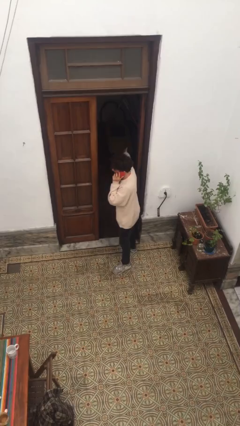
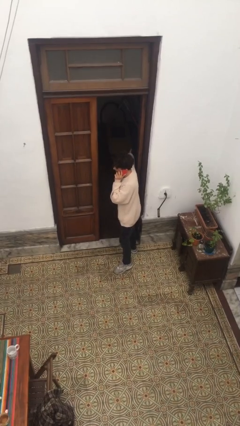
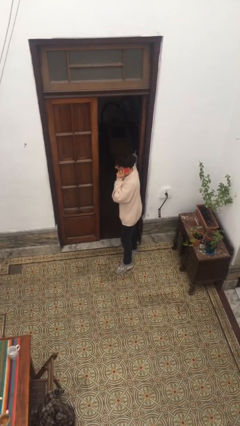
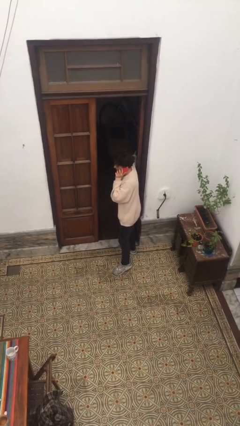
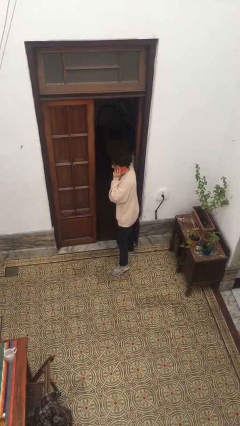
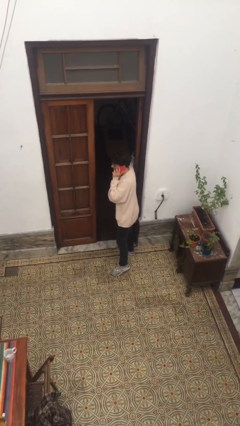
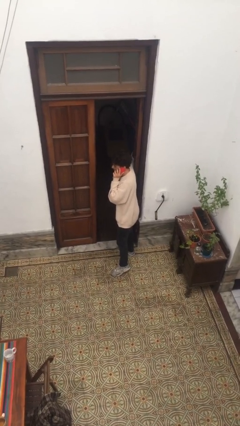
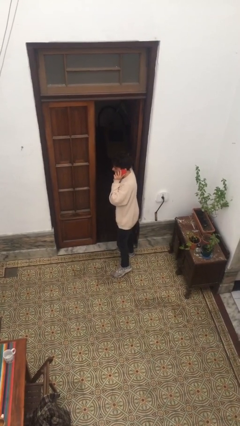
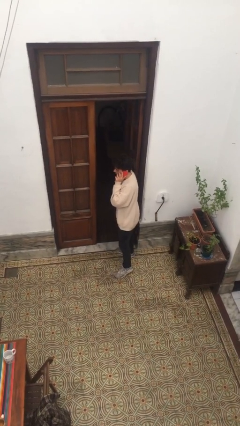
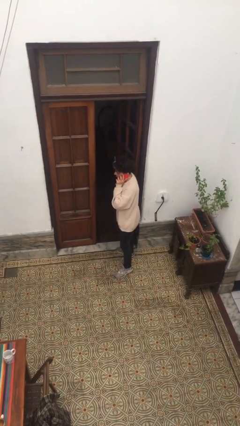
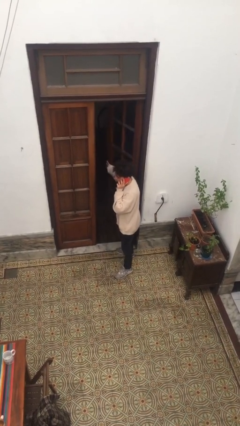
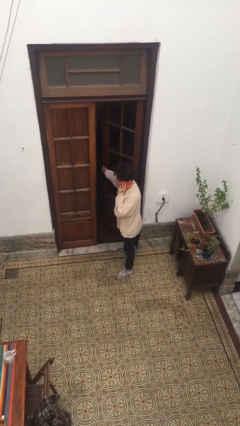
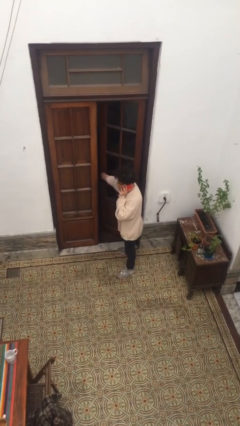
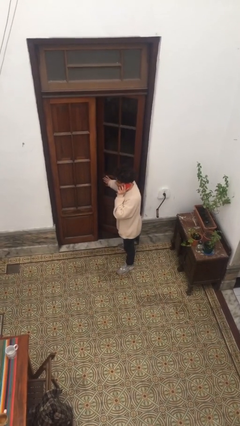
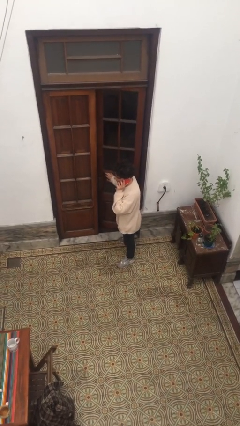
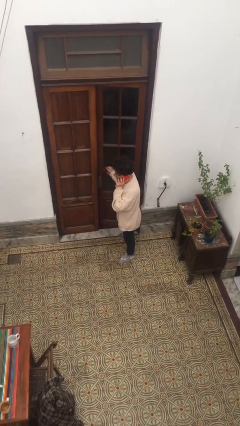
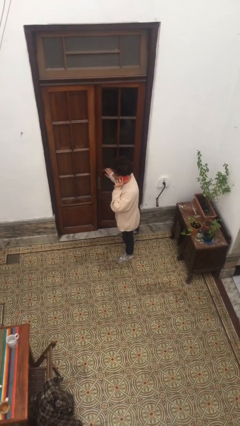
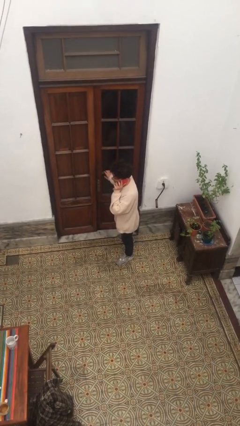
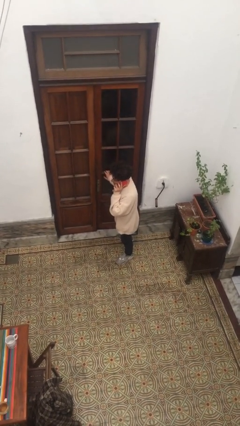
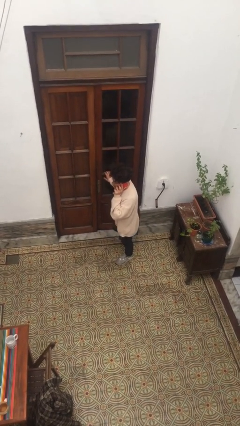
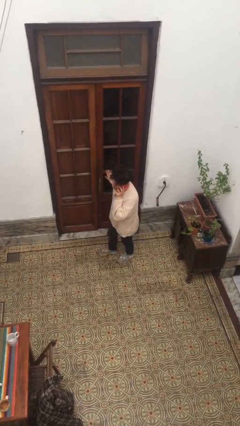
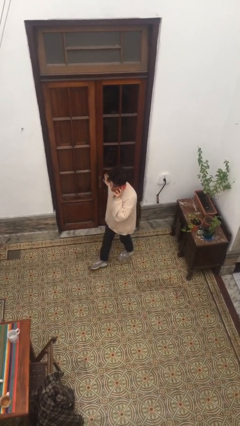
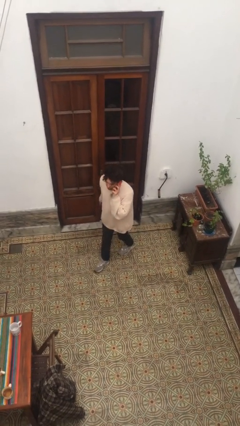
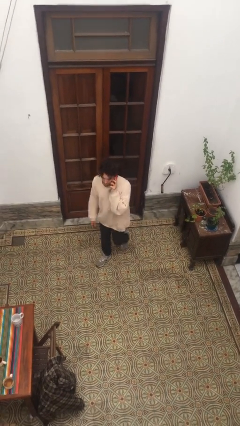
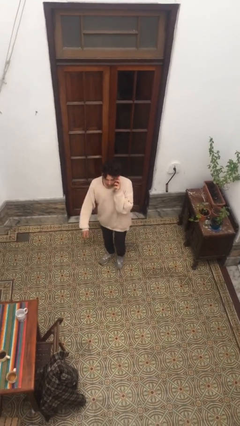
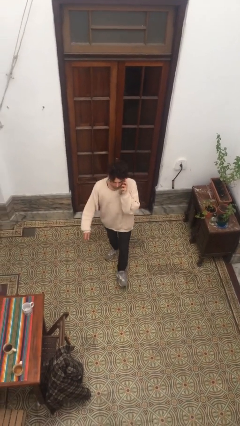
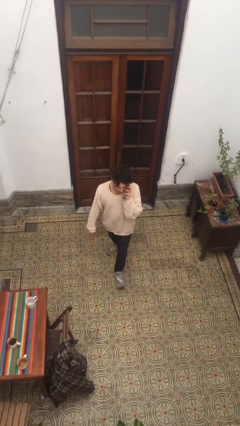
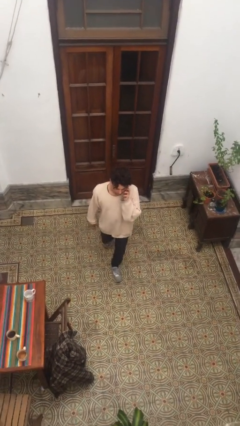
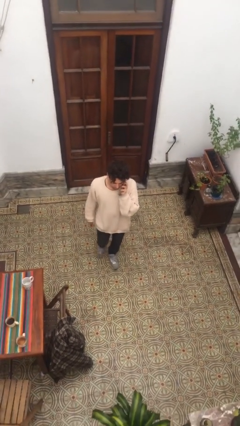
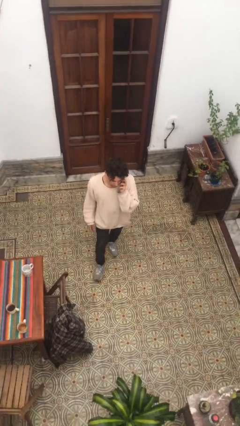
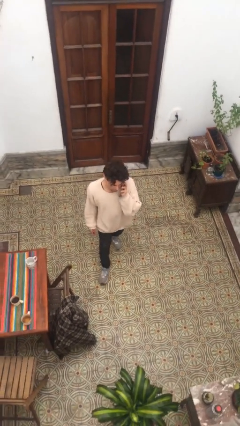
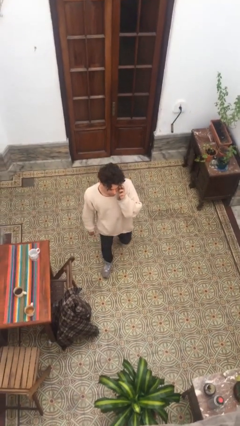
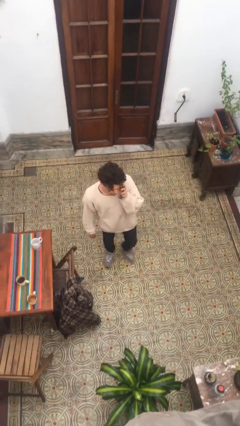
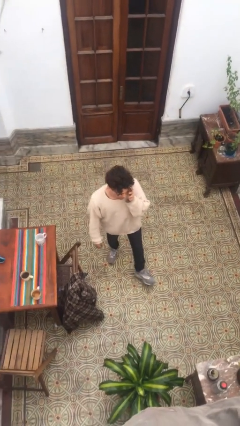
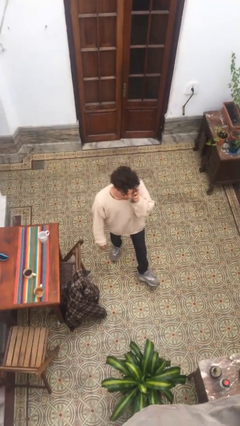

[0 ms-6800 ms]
person closes facility door

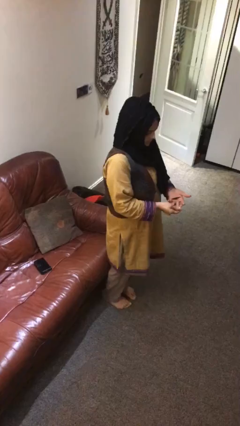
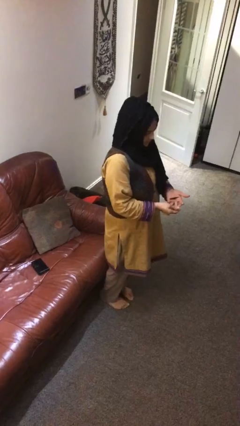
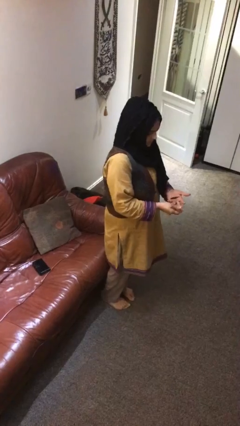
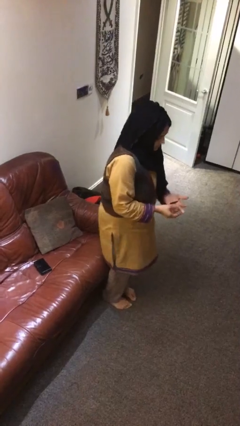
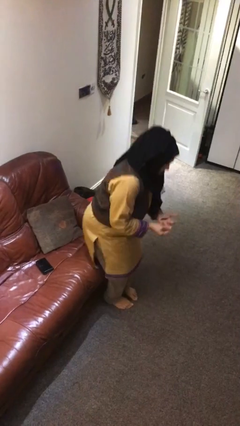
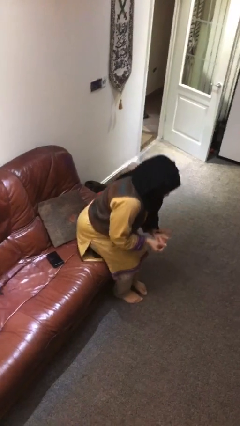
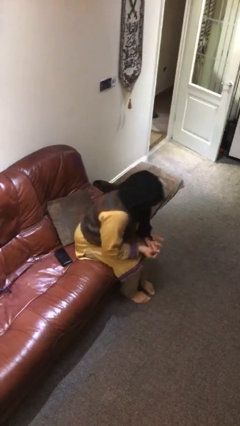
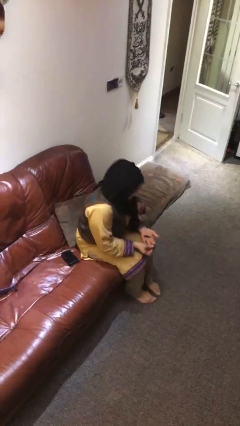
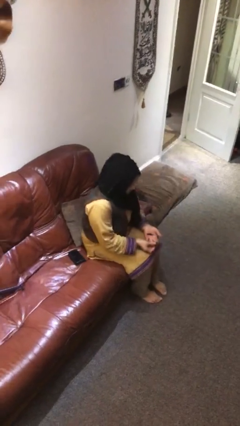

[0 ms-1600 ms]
person sits down

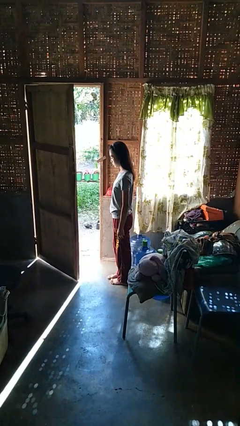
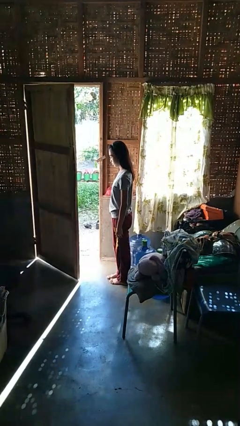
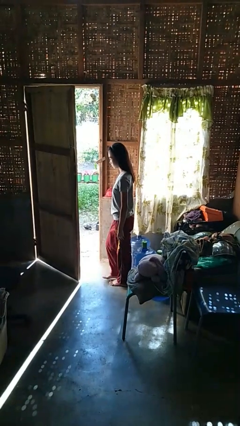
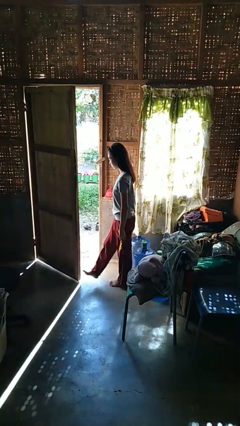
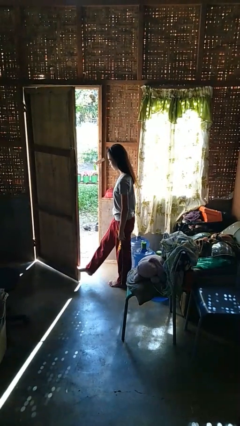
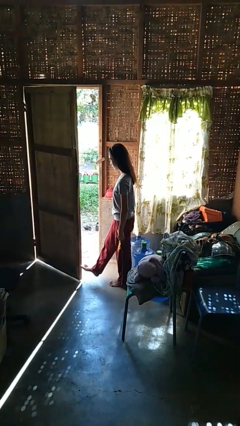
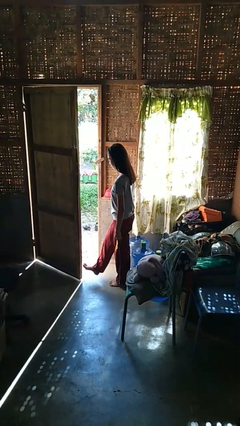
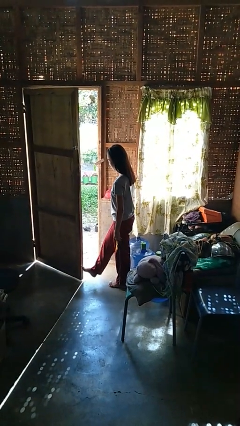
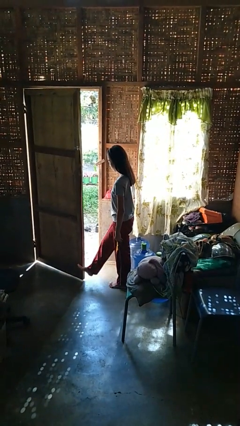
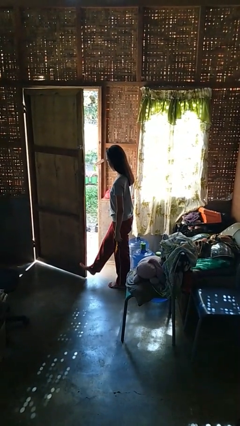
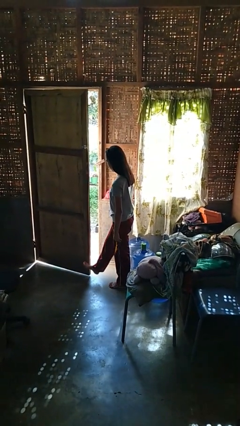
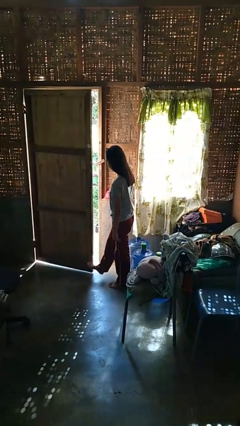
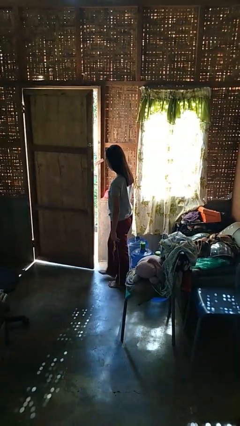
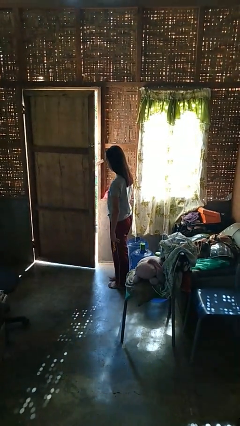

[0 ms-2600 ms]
person closes door with foot

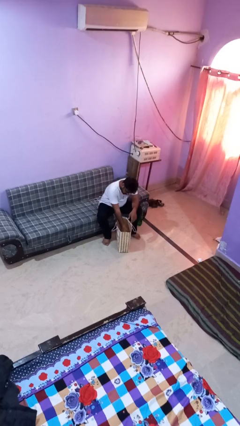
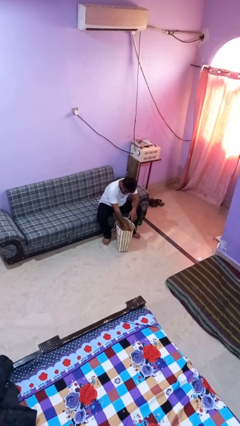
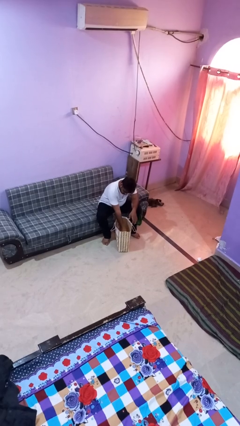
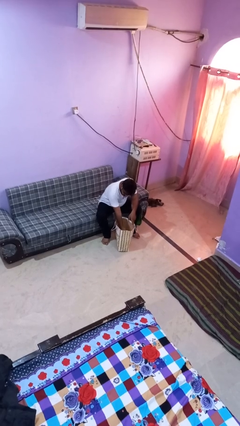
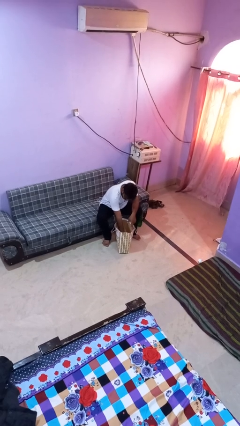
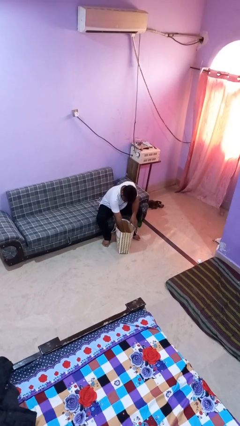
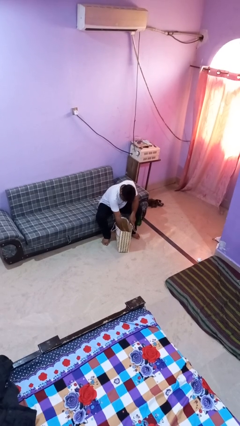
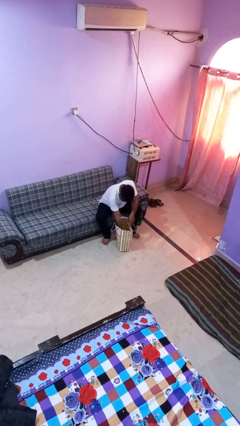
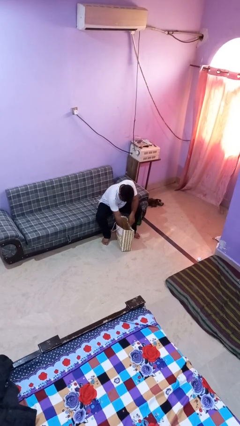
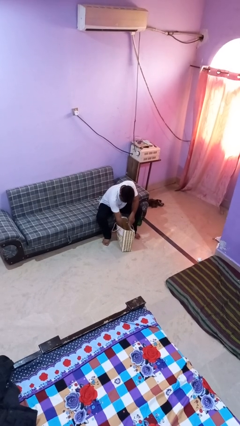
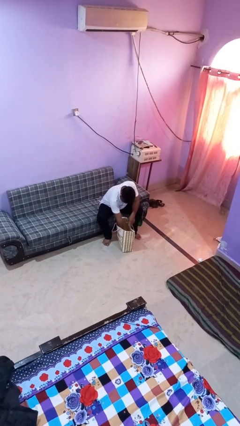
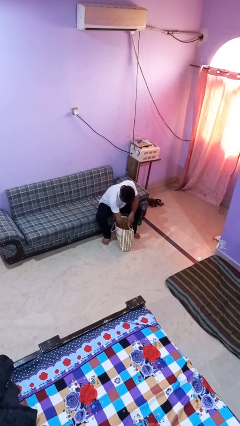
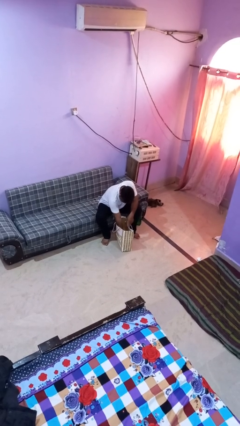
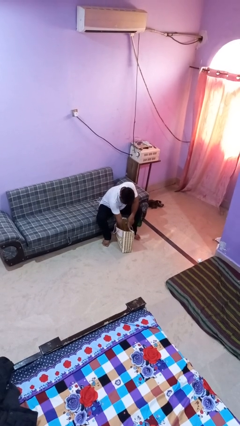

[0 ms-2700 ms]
person searches in bag

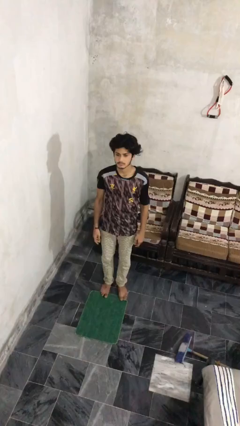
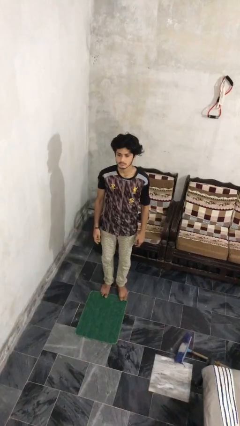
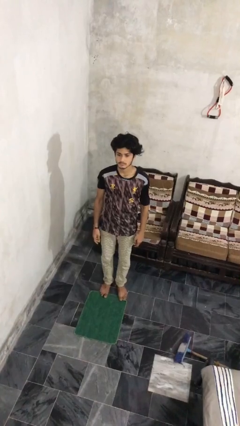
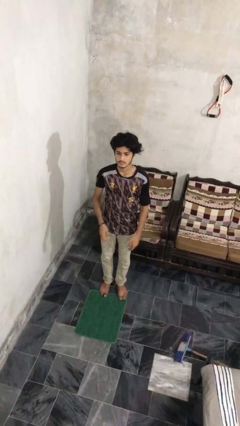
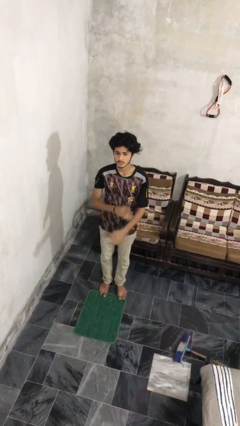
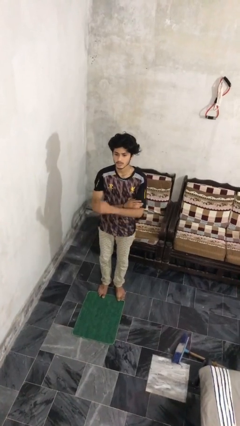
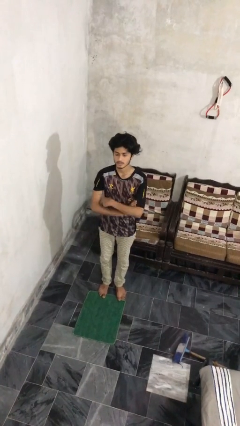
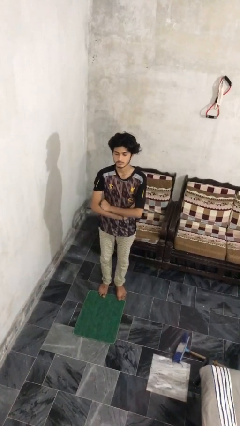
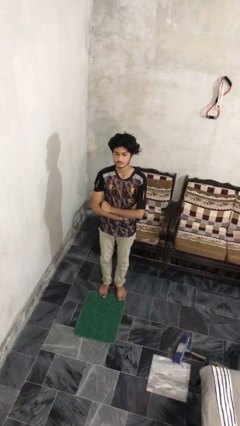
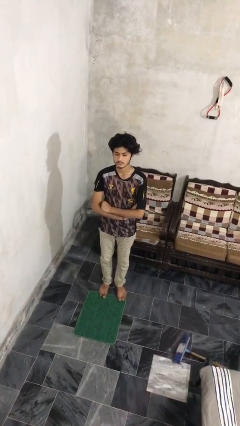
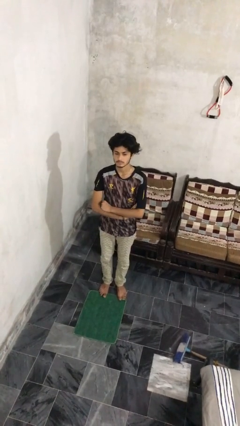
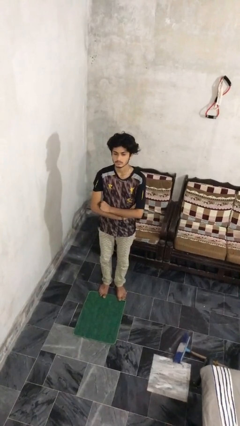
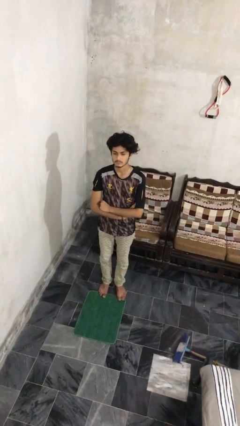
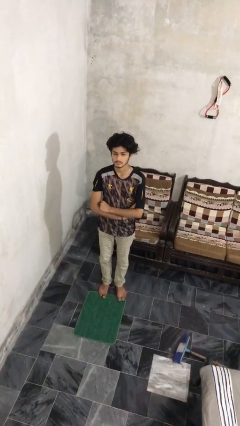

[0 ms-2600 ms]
person crosses arms

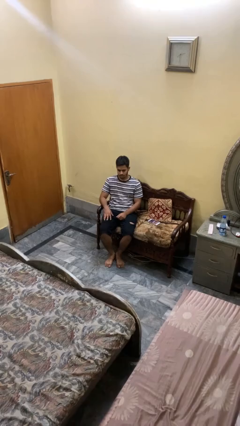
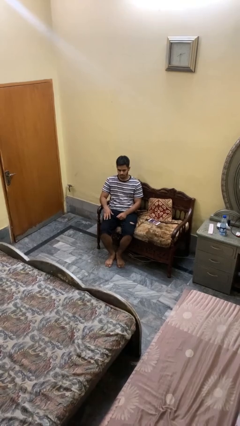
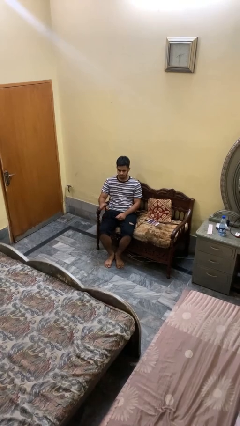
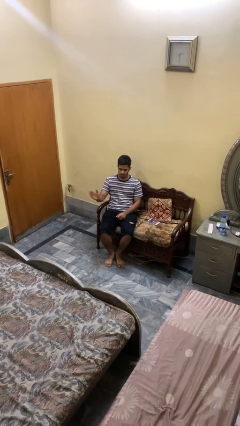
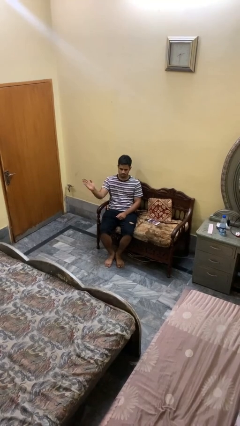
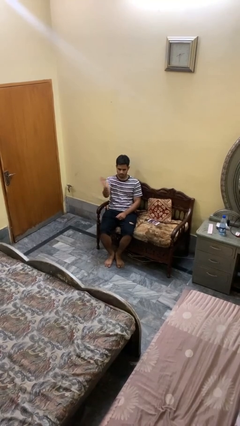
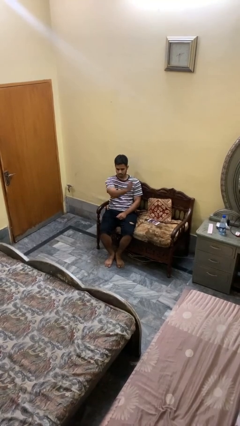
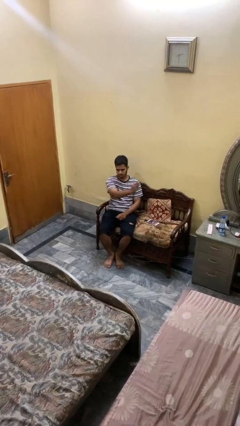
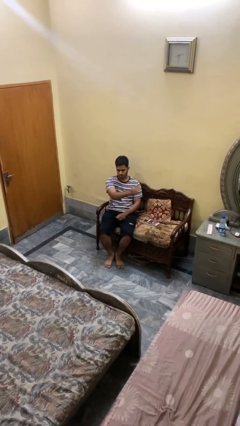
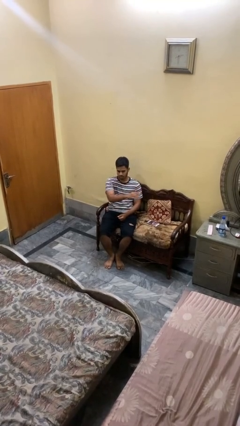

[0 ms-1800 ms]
person gestures swipe left
